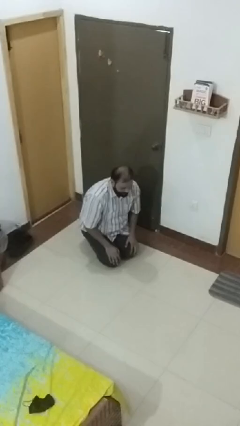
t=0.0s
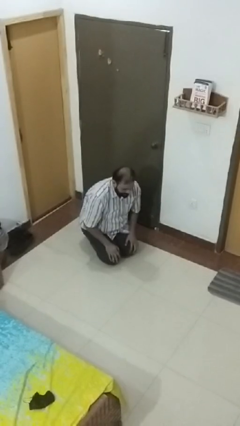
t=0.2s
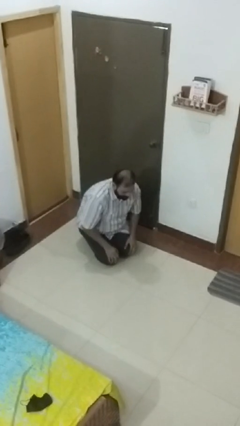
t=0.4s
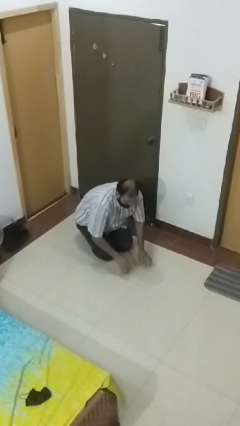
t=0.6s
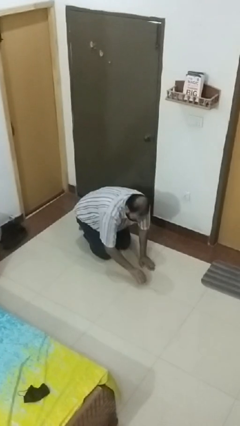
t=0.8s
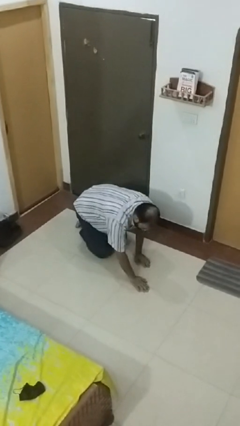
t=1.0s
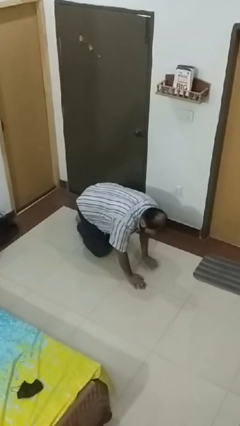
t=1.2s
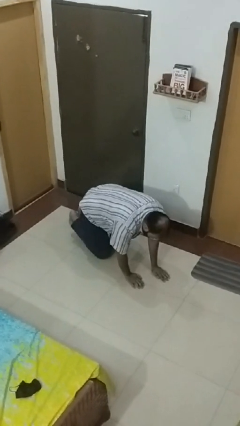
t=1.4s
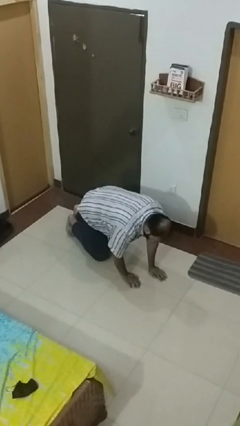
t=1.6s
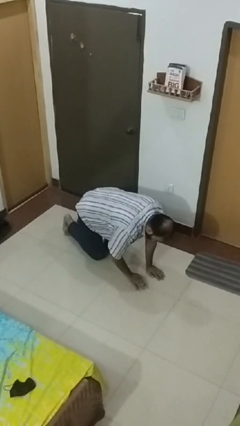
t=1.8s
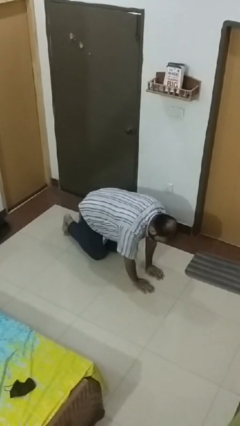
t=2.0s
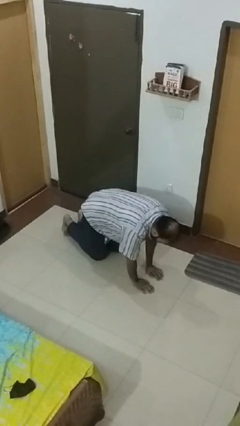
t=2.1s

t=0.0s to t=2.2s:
person crawls

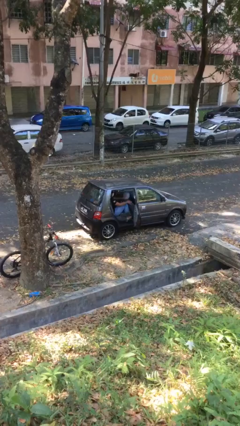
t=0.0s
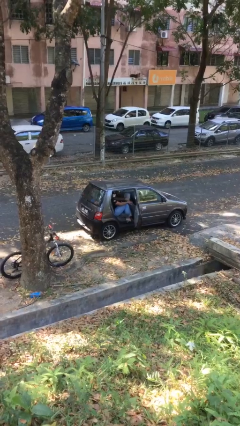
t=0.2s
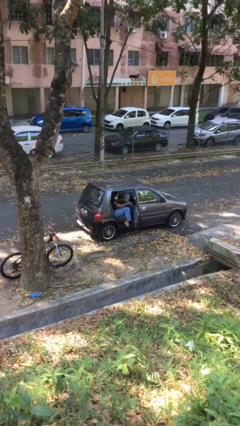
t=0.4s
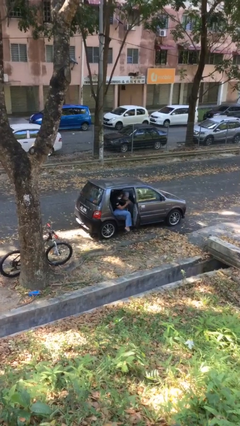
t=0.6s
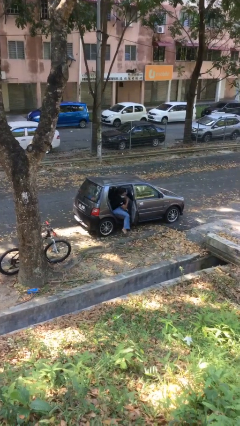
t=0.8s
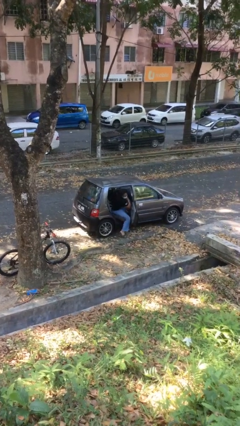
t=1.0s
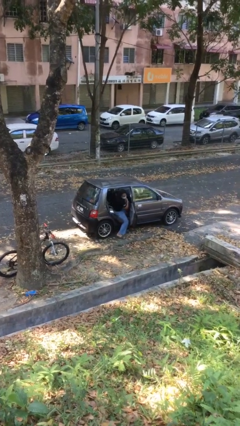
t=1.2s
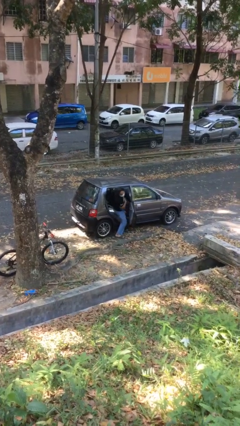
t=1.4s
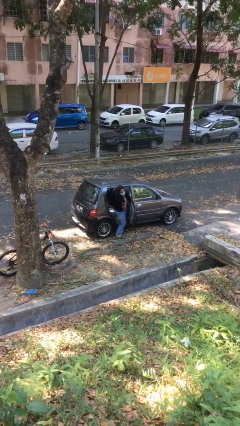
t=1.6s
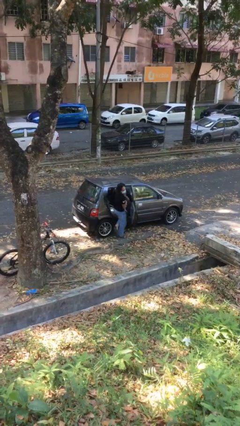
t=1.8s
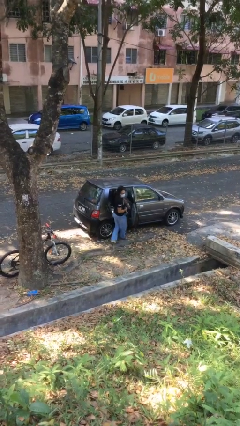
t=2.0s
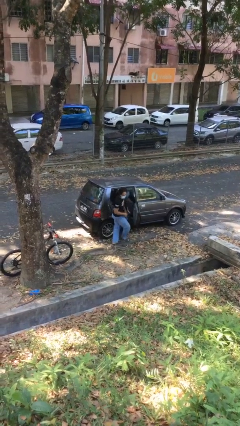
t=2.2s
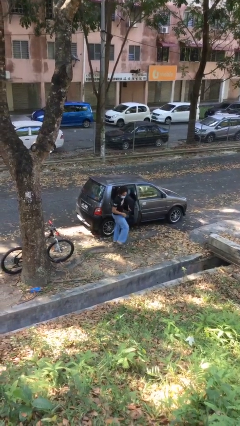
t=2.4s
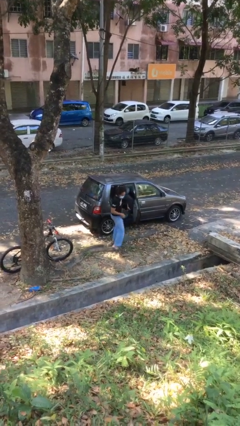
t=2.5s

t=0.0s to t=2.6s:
person exits car

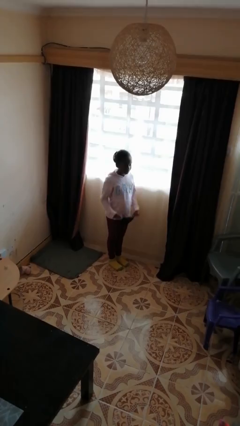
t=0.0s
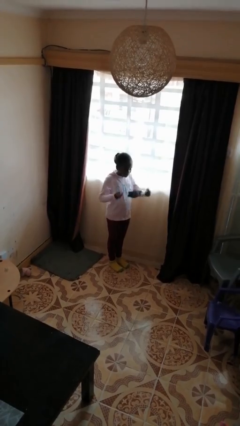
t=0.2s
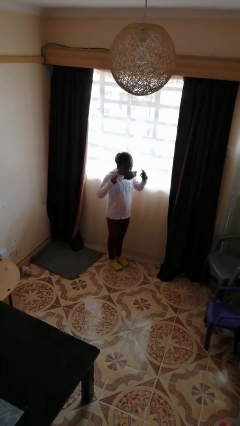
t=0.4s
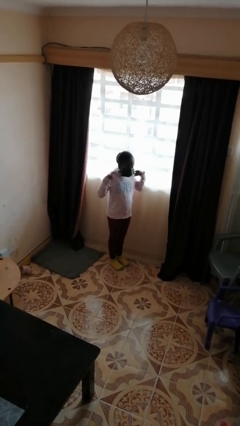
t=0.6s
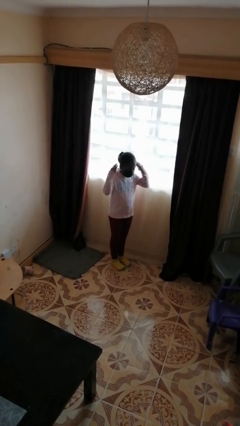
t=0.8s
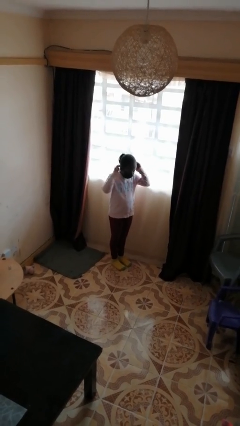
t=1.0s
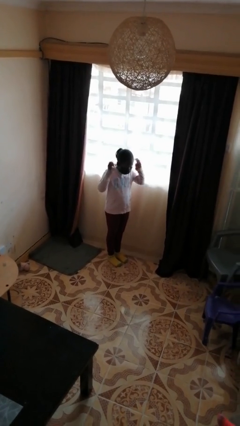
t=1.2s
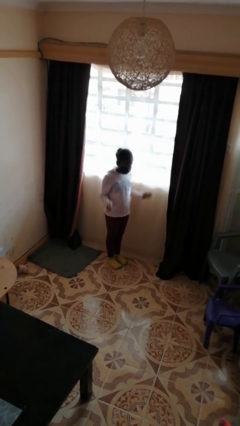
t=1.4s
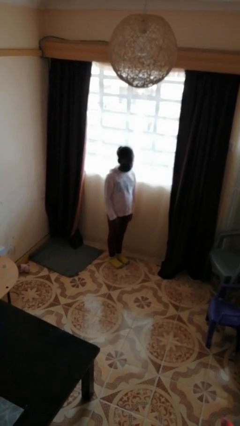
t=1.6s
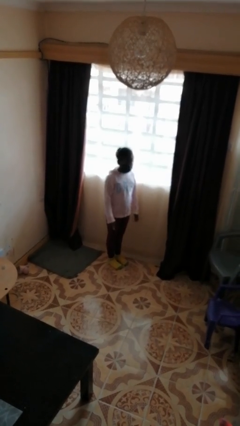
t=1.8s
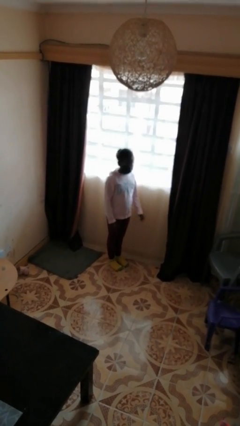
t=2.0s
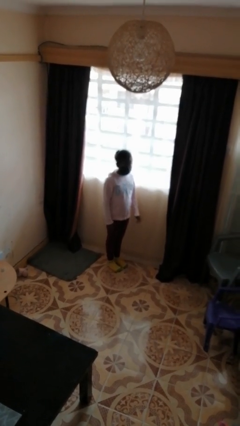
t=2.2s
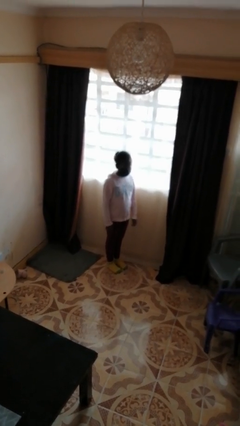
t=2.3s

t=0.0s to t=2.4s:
person puts on facemask

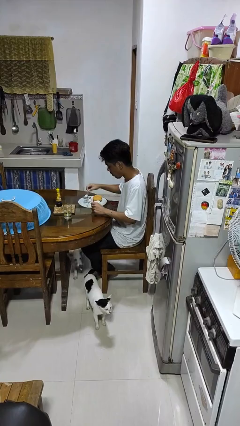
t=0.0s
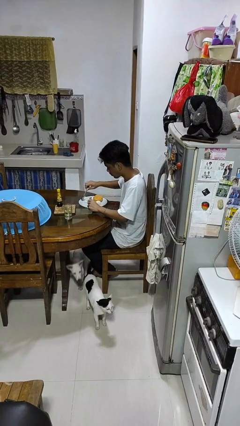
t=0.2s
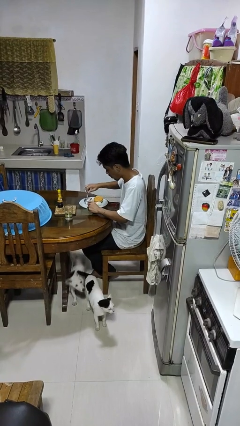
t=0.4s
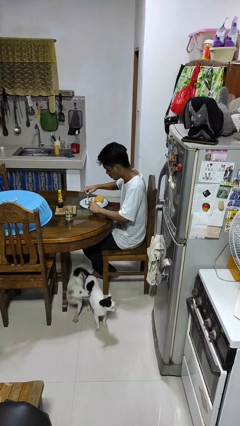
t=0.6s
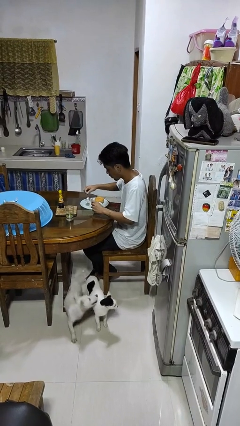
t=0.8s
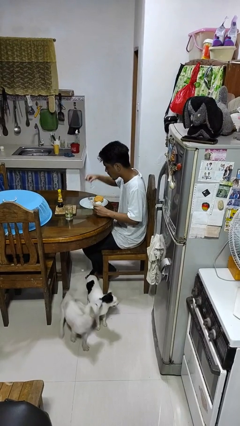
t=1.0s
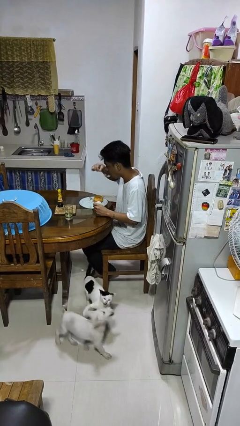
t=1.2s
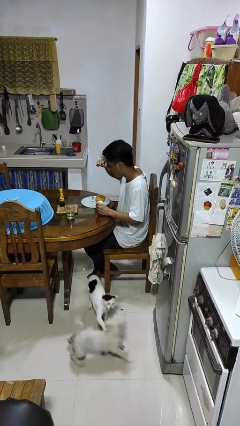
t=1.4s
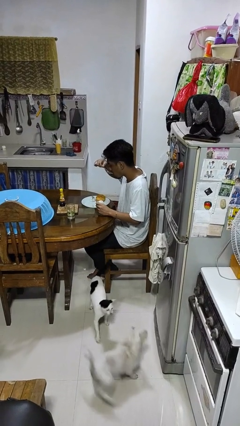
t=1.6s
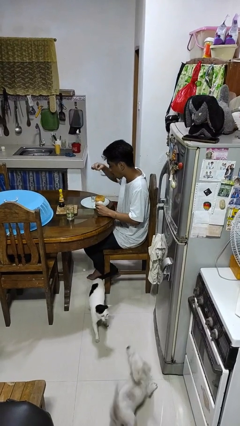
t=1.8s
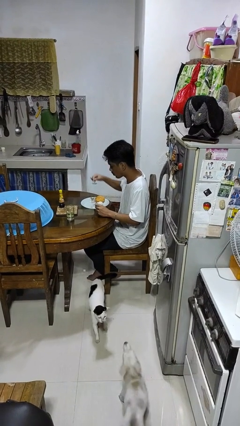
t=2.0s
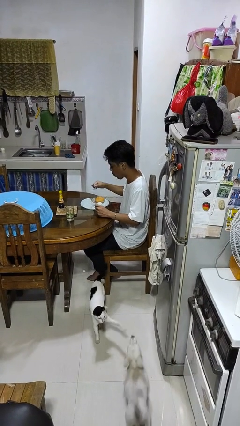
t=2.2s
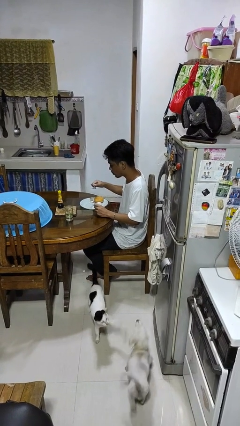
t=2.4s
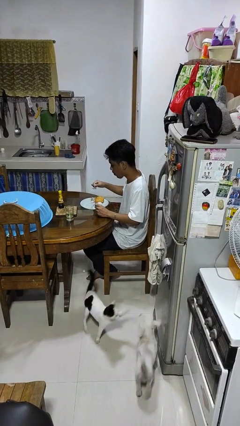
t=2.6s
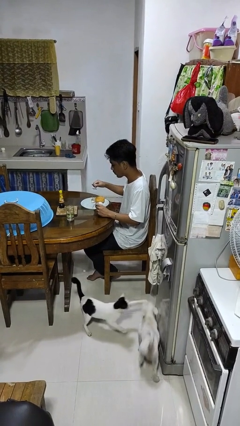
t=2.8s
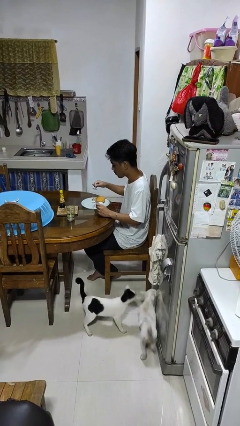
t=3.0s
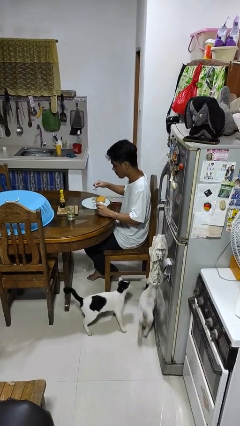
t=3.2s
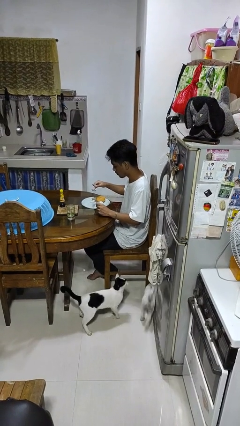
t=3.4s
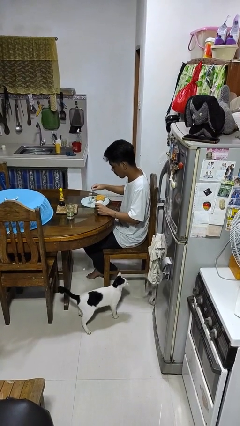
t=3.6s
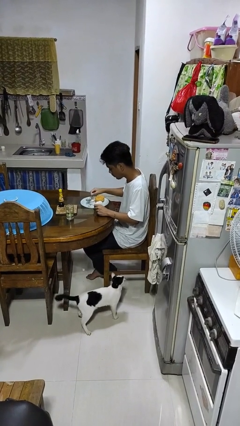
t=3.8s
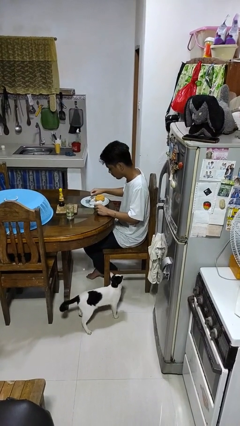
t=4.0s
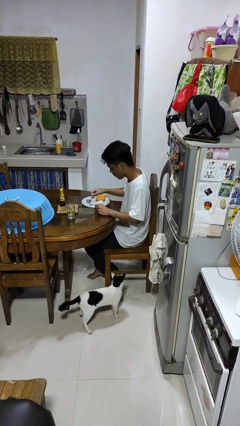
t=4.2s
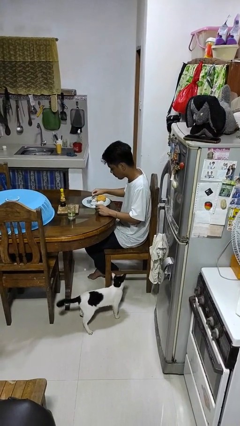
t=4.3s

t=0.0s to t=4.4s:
person eats with utensil

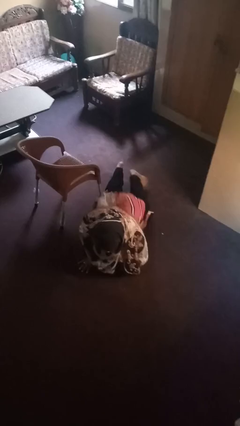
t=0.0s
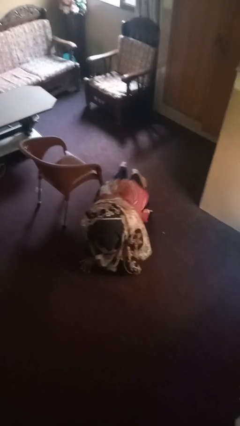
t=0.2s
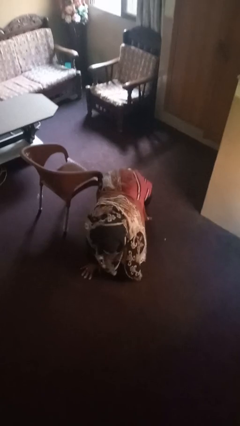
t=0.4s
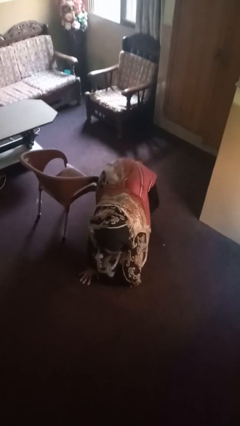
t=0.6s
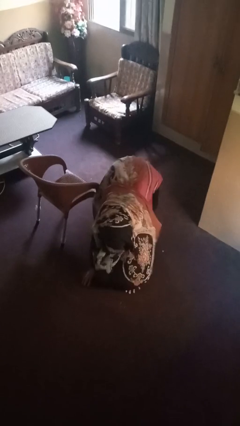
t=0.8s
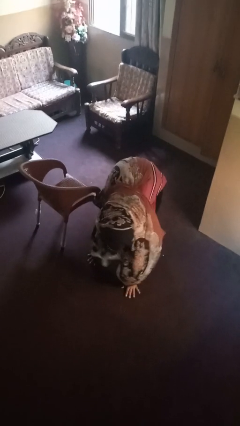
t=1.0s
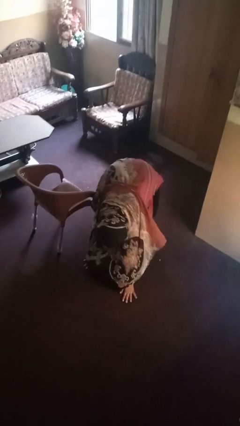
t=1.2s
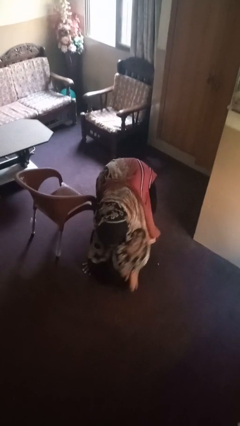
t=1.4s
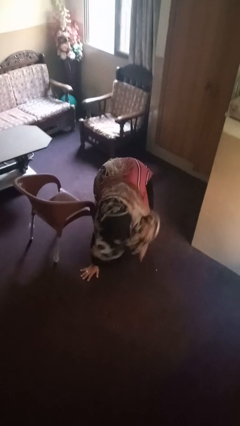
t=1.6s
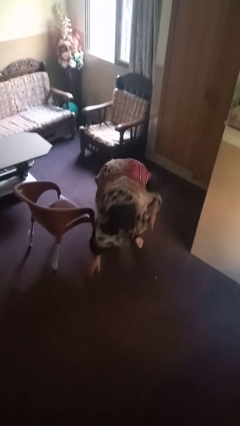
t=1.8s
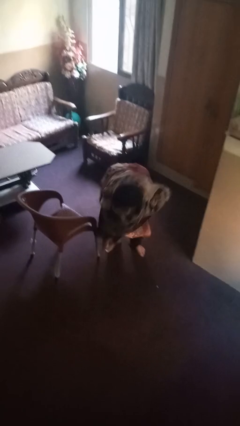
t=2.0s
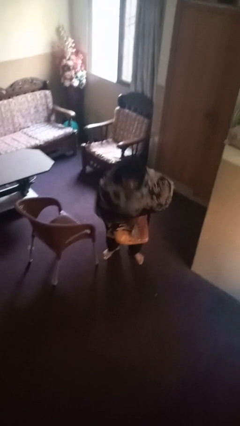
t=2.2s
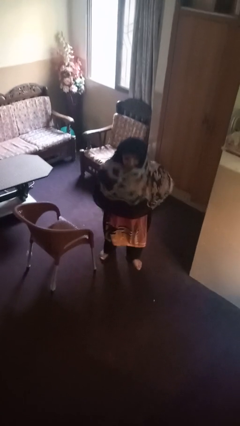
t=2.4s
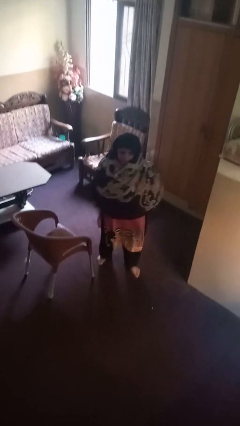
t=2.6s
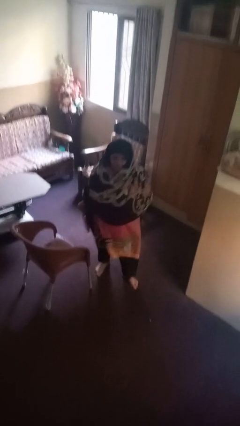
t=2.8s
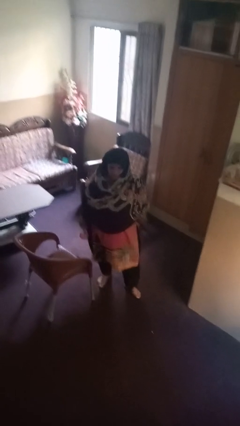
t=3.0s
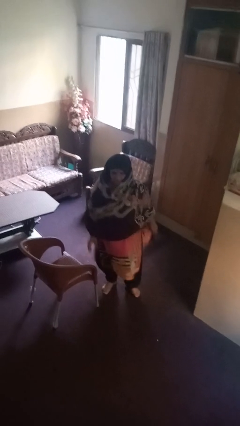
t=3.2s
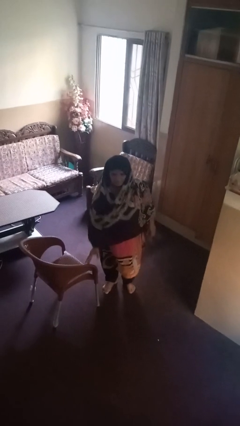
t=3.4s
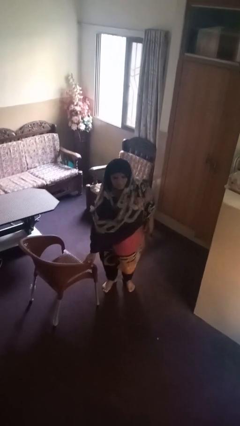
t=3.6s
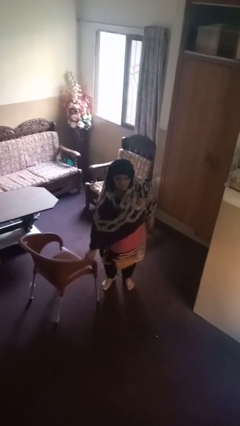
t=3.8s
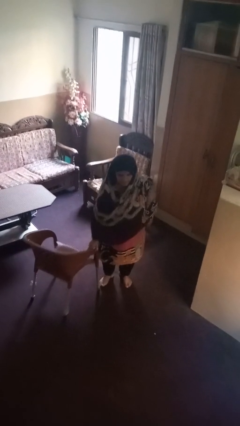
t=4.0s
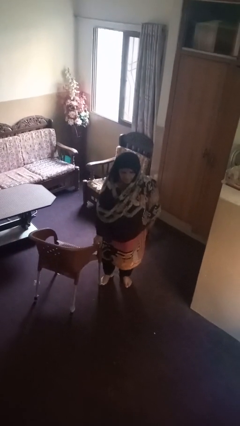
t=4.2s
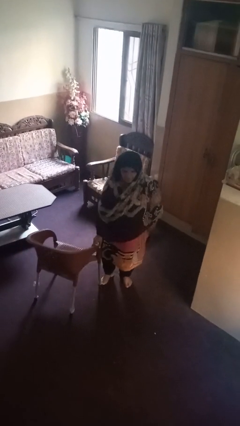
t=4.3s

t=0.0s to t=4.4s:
person stands up from floor

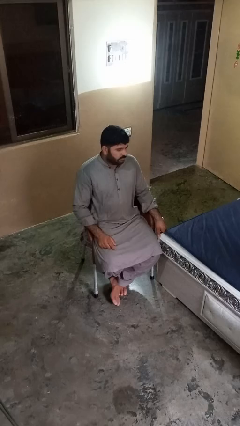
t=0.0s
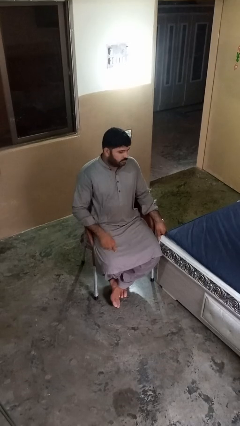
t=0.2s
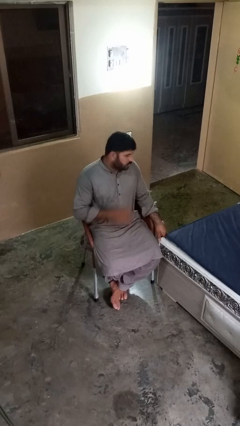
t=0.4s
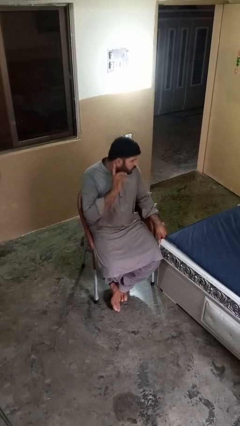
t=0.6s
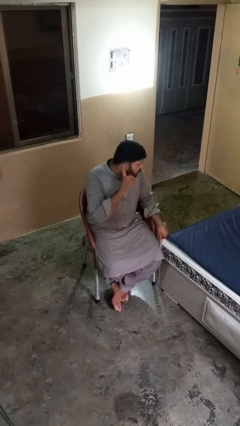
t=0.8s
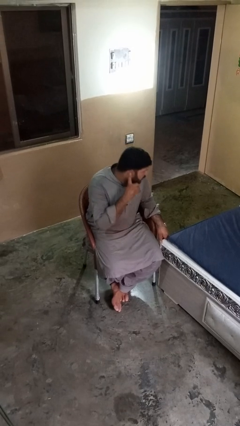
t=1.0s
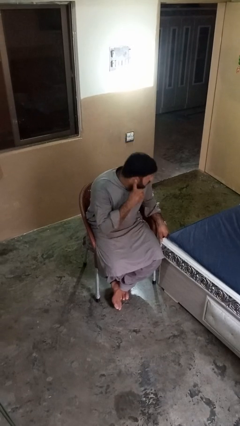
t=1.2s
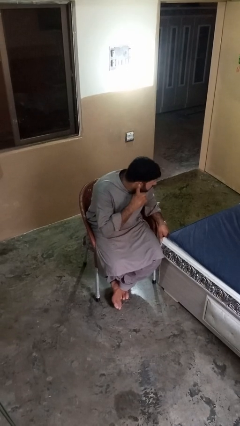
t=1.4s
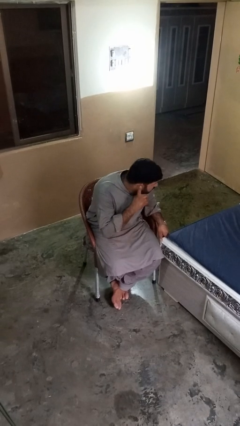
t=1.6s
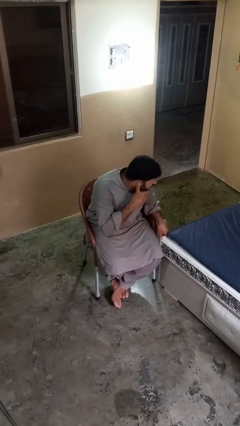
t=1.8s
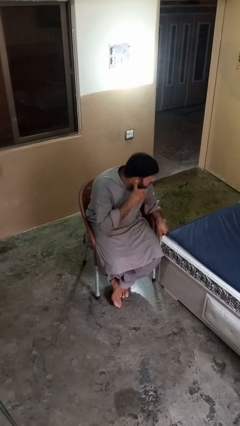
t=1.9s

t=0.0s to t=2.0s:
person gestures listen closely
